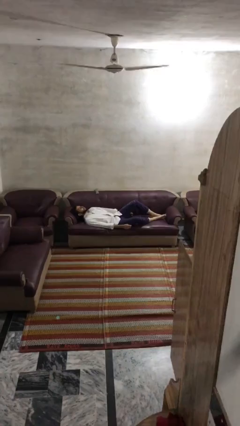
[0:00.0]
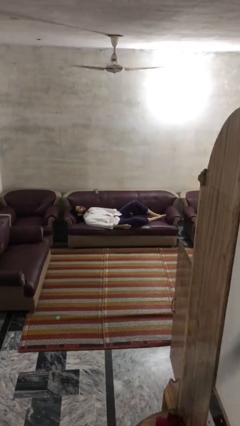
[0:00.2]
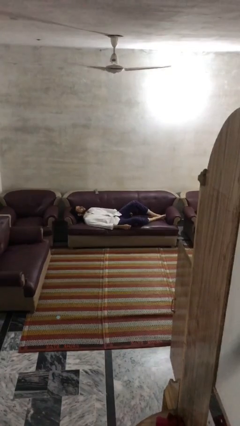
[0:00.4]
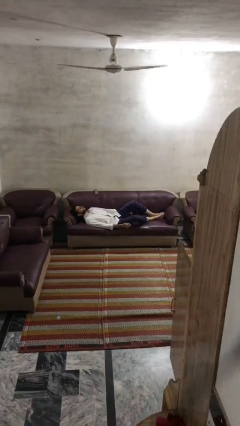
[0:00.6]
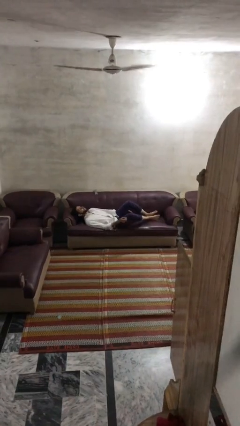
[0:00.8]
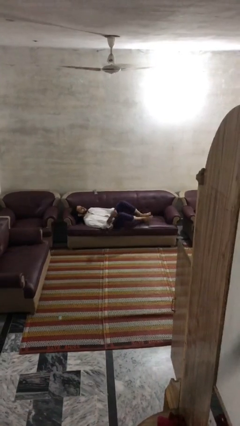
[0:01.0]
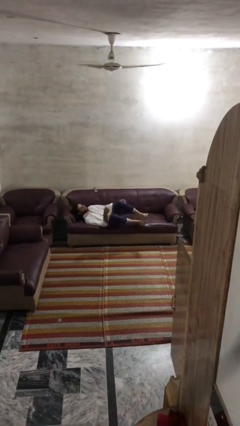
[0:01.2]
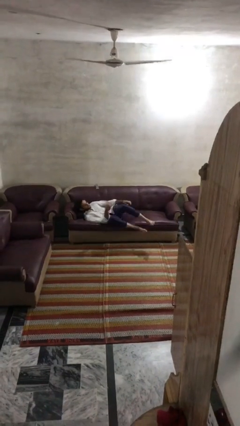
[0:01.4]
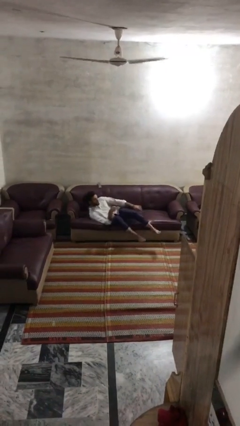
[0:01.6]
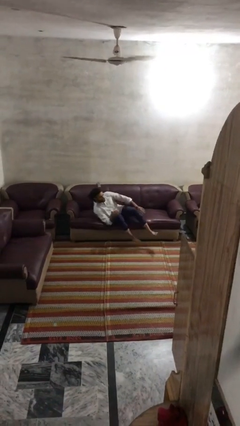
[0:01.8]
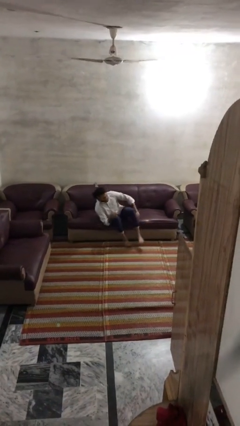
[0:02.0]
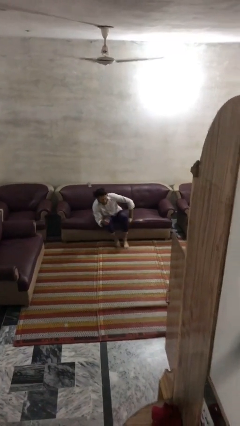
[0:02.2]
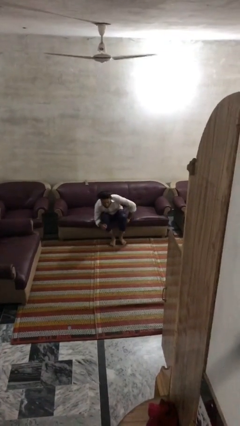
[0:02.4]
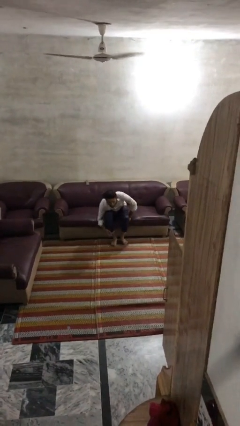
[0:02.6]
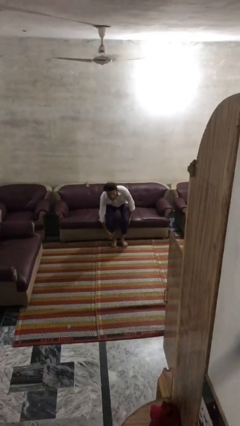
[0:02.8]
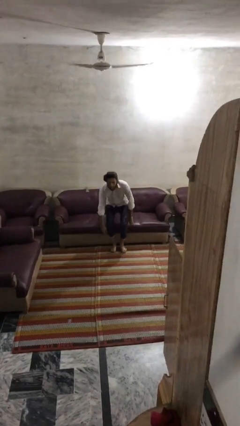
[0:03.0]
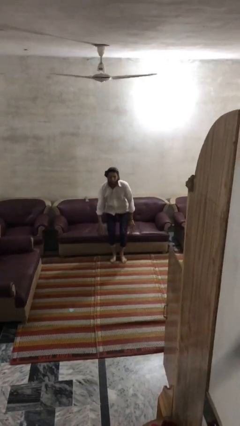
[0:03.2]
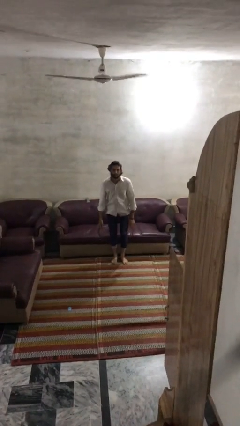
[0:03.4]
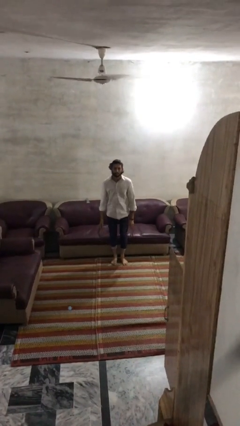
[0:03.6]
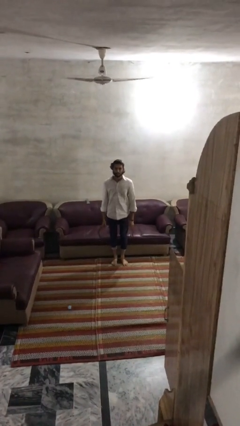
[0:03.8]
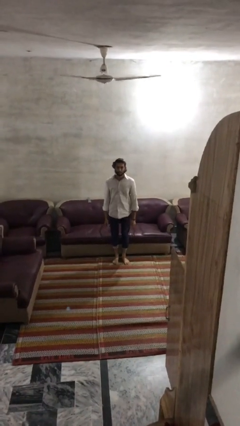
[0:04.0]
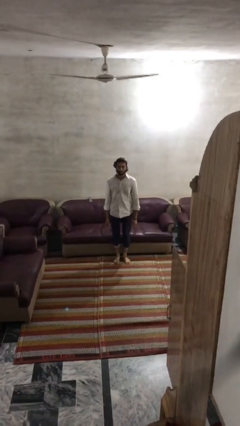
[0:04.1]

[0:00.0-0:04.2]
person stands up

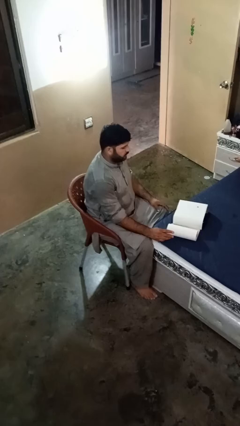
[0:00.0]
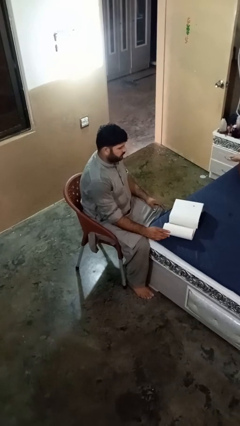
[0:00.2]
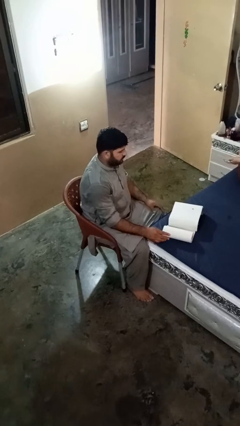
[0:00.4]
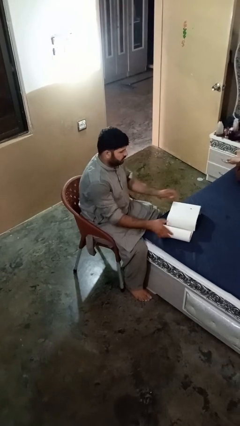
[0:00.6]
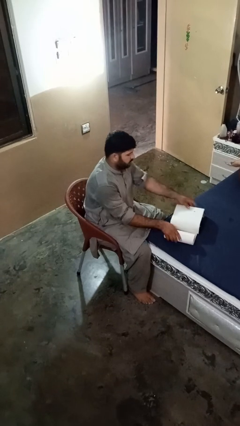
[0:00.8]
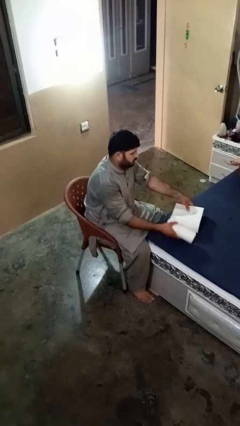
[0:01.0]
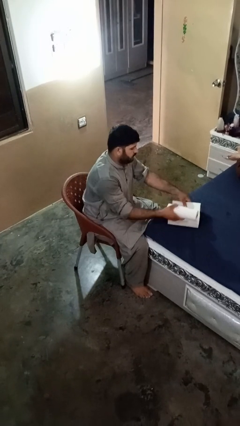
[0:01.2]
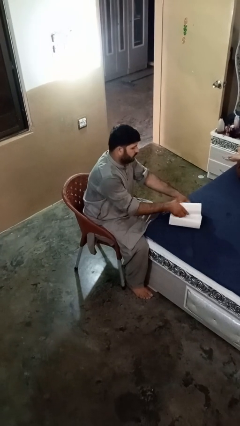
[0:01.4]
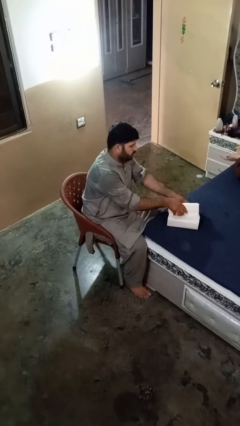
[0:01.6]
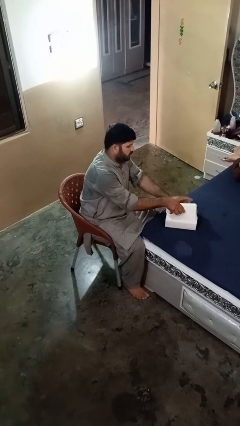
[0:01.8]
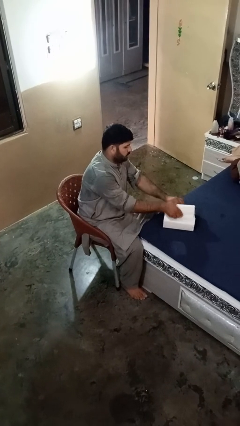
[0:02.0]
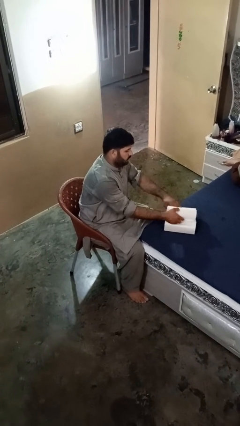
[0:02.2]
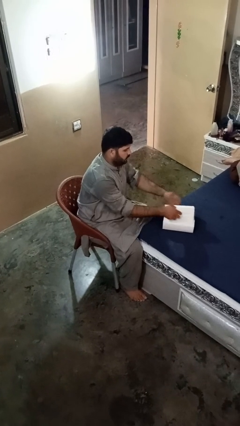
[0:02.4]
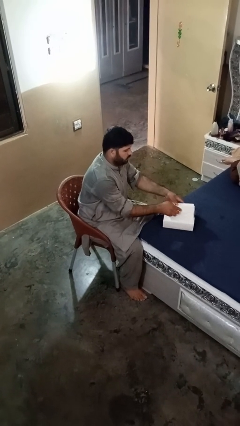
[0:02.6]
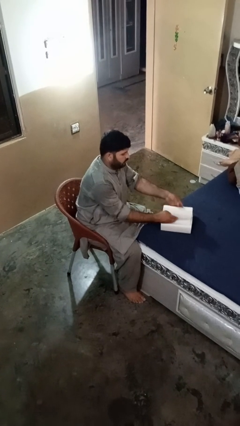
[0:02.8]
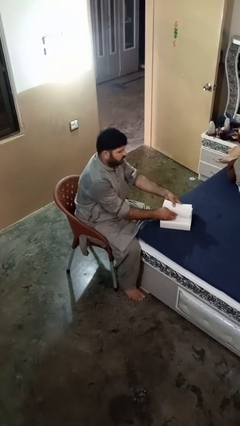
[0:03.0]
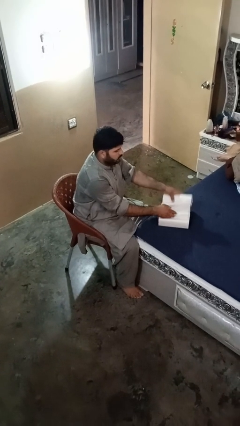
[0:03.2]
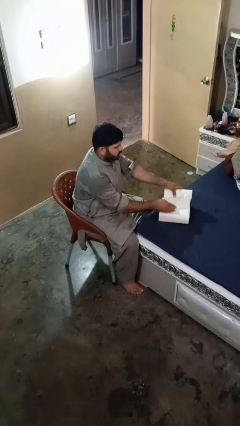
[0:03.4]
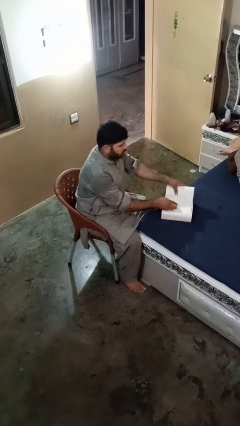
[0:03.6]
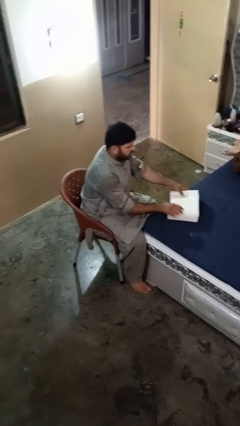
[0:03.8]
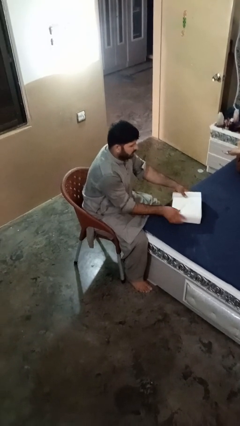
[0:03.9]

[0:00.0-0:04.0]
person wraps box

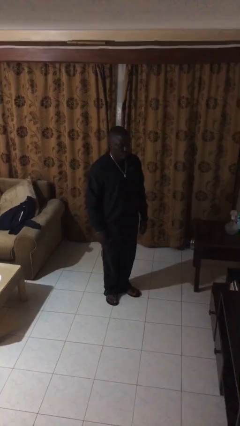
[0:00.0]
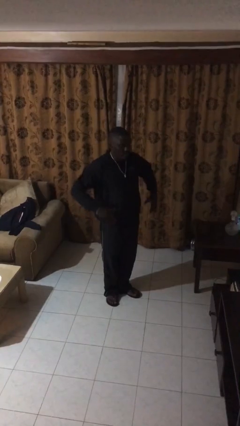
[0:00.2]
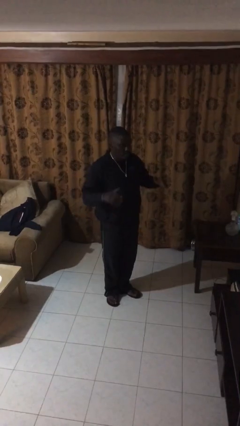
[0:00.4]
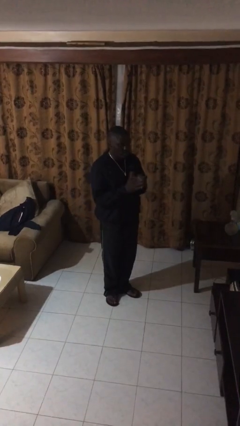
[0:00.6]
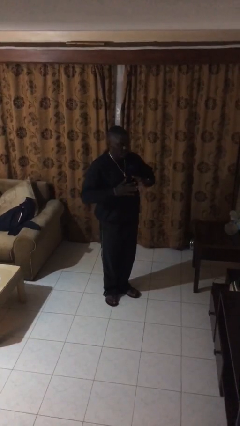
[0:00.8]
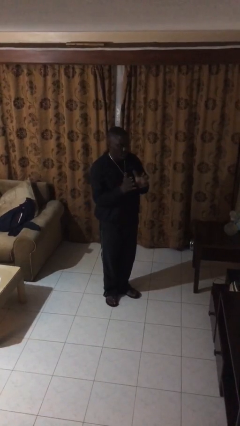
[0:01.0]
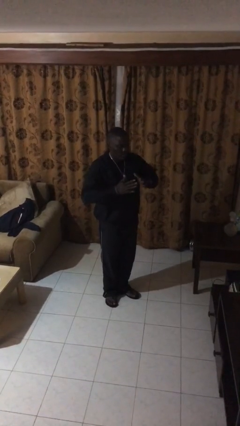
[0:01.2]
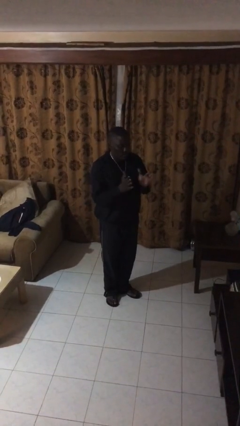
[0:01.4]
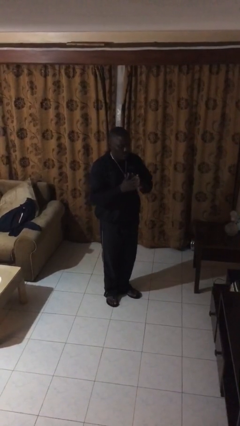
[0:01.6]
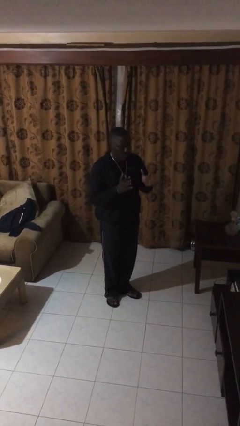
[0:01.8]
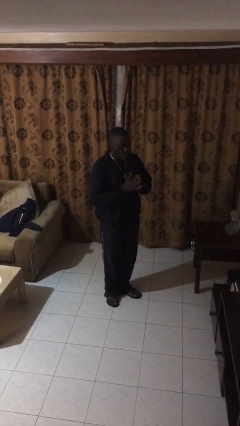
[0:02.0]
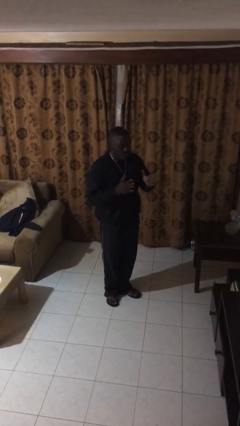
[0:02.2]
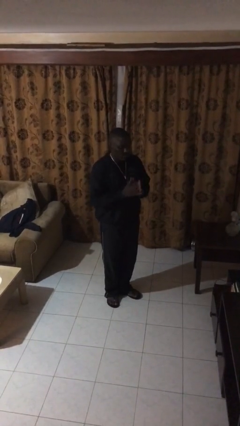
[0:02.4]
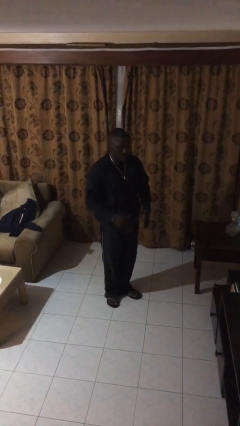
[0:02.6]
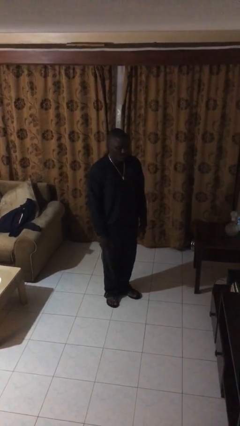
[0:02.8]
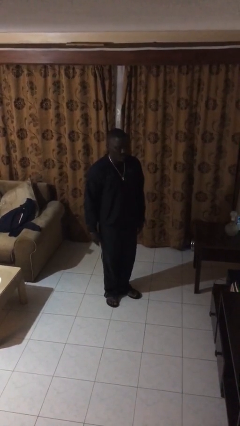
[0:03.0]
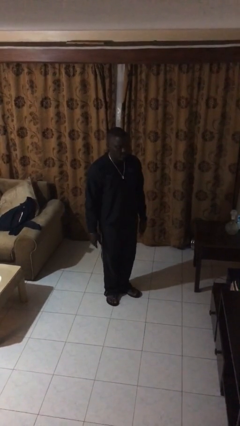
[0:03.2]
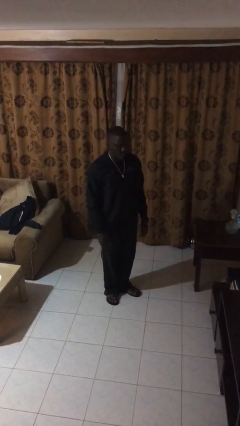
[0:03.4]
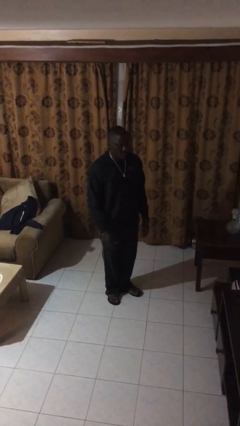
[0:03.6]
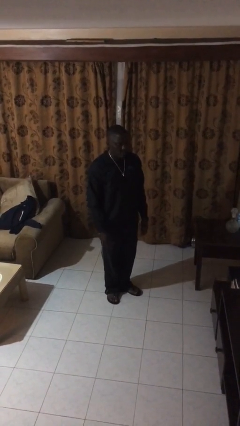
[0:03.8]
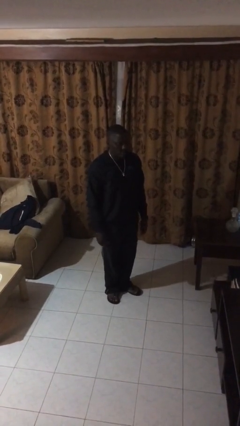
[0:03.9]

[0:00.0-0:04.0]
person claps hands

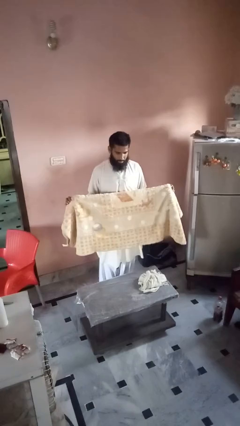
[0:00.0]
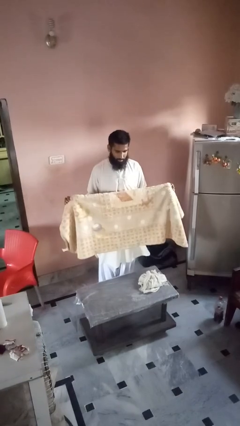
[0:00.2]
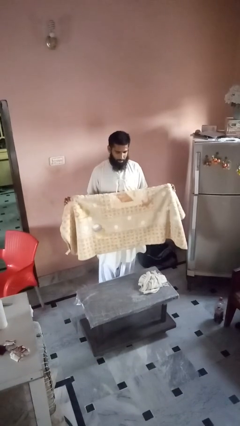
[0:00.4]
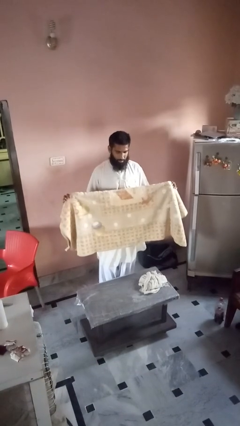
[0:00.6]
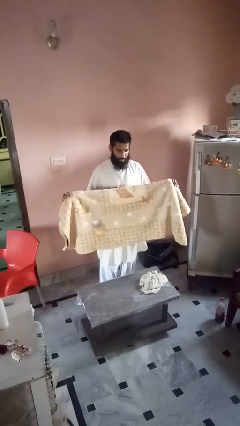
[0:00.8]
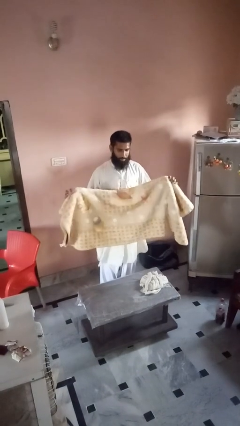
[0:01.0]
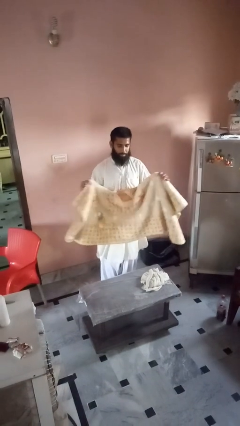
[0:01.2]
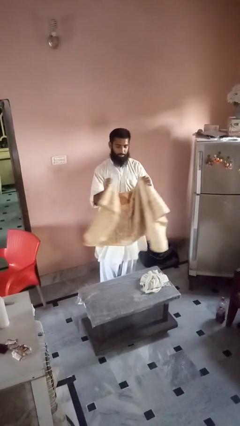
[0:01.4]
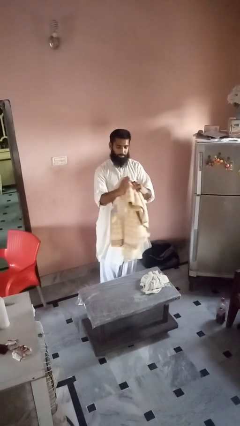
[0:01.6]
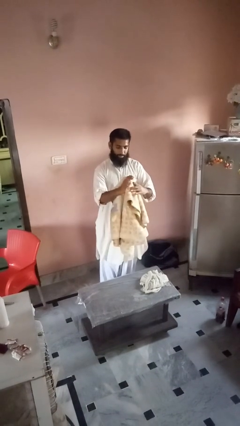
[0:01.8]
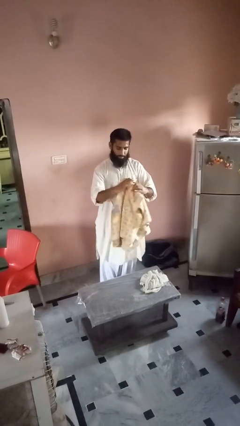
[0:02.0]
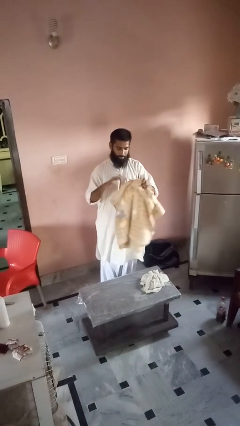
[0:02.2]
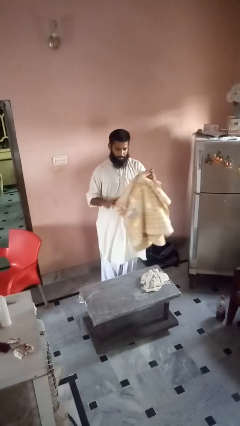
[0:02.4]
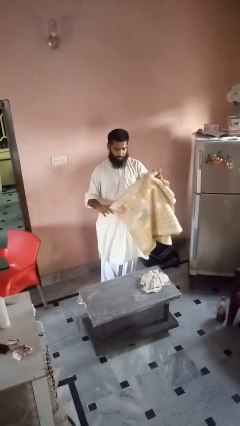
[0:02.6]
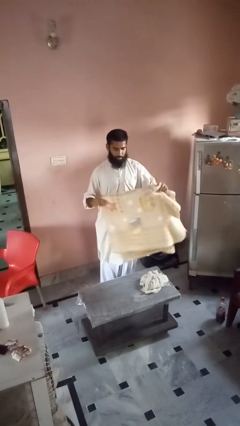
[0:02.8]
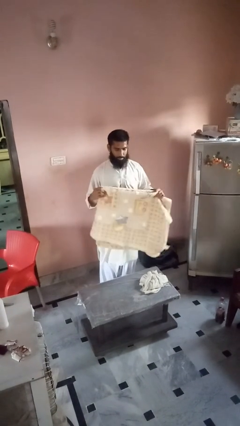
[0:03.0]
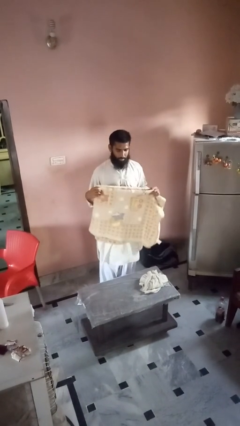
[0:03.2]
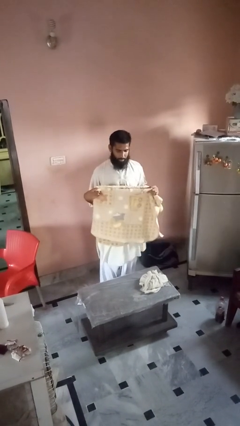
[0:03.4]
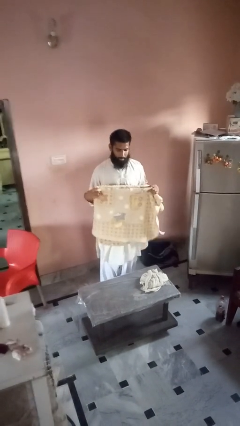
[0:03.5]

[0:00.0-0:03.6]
person folds blanket

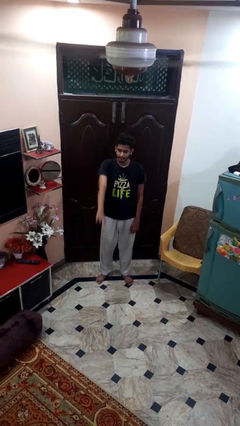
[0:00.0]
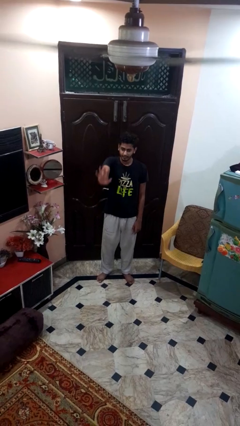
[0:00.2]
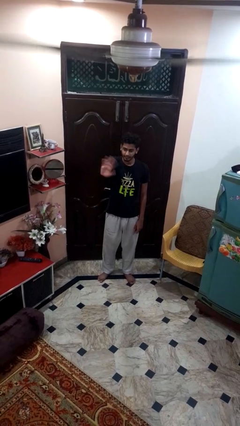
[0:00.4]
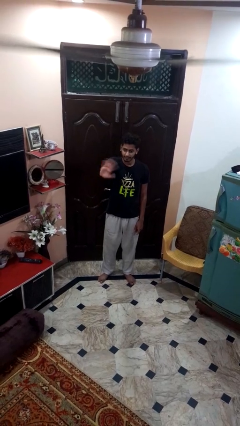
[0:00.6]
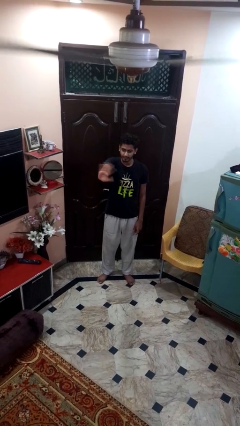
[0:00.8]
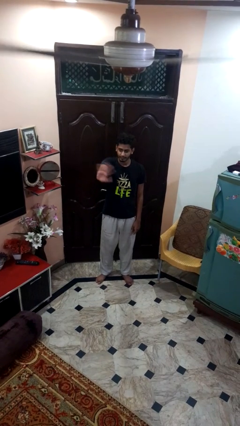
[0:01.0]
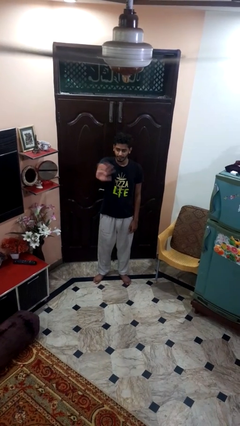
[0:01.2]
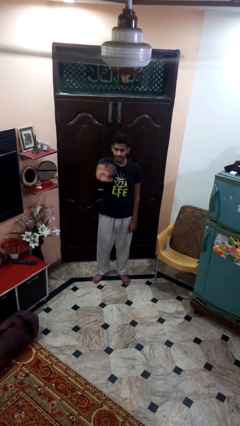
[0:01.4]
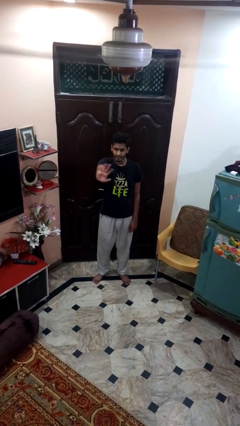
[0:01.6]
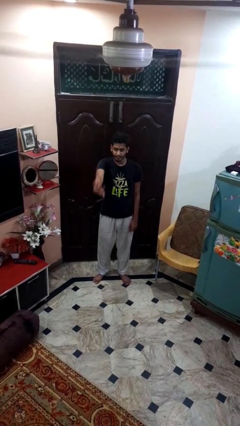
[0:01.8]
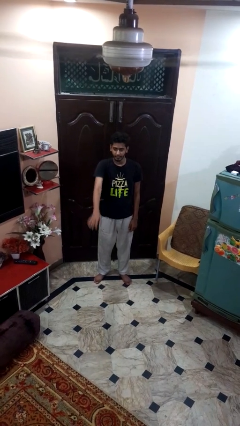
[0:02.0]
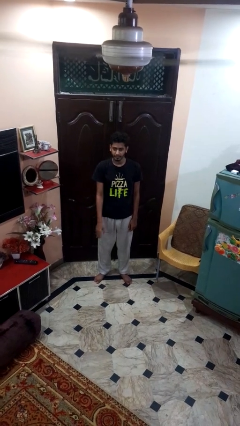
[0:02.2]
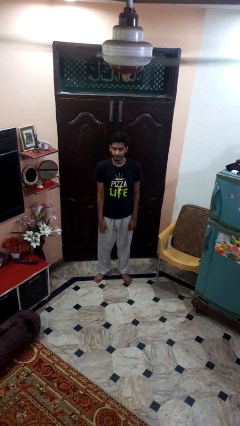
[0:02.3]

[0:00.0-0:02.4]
person waves at person
